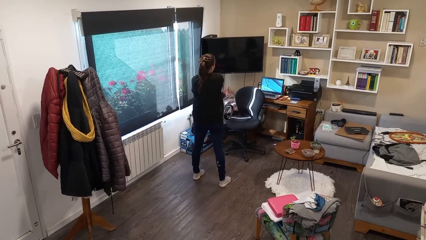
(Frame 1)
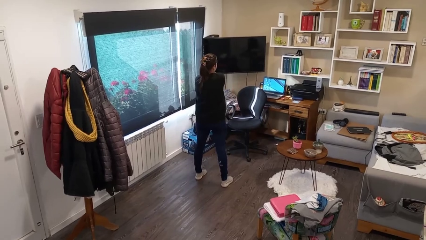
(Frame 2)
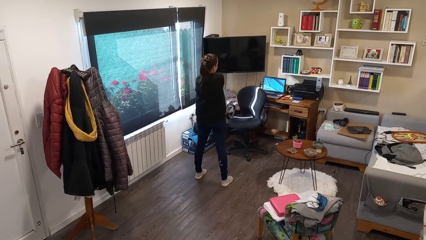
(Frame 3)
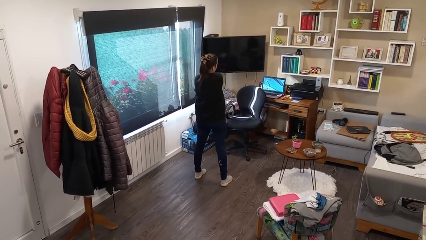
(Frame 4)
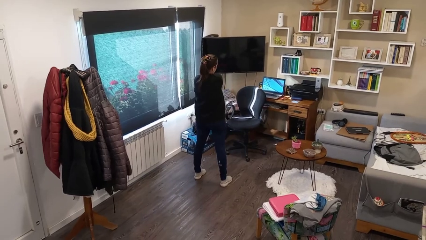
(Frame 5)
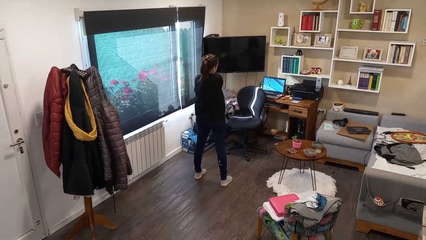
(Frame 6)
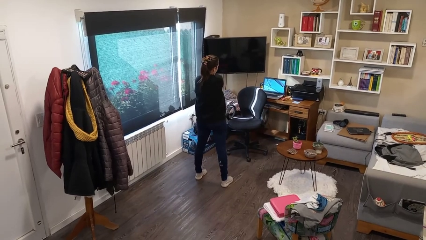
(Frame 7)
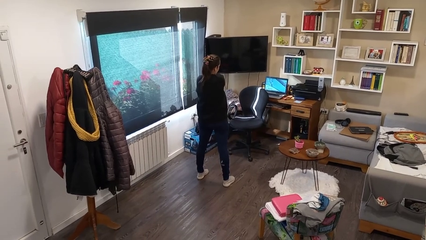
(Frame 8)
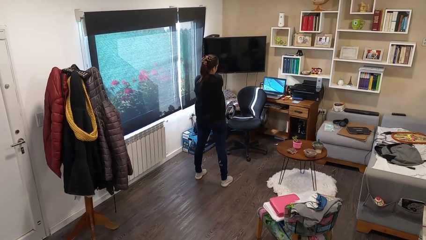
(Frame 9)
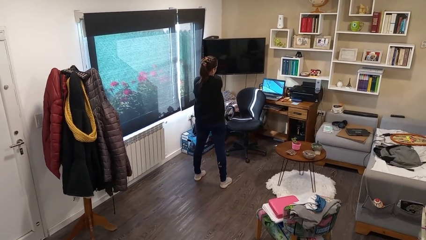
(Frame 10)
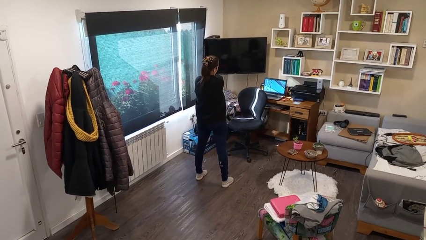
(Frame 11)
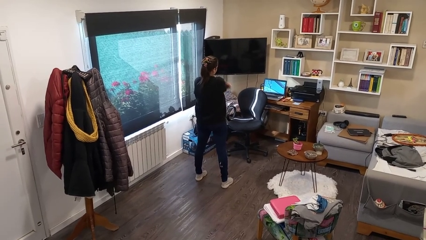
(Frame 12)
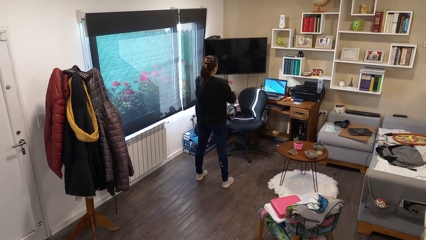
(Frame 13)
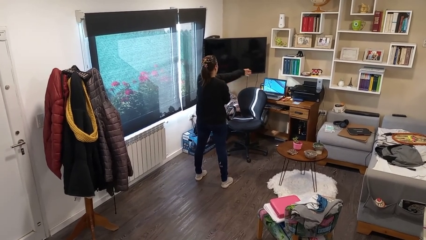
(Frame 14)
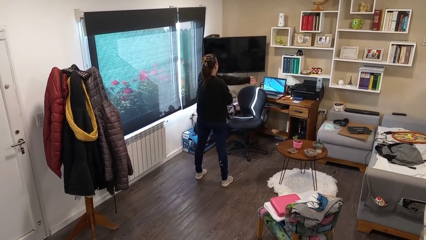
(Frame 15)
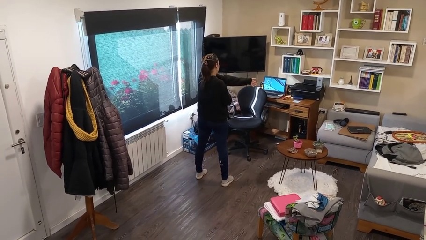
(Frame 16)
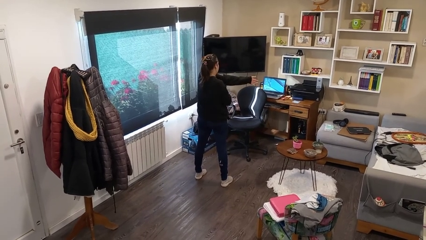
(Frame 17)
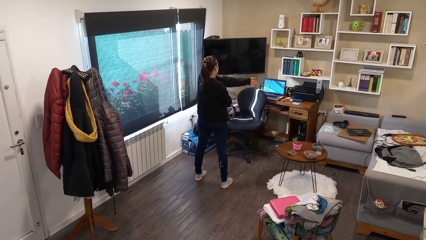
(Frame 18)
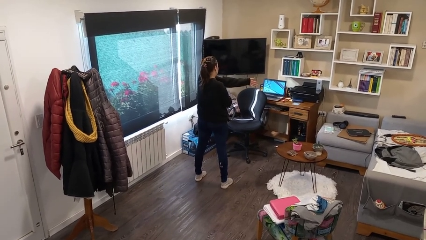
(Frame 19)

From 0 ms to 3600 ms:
person stretches arms to side

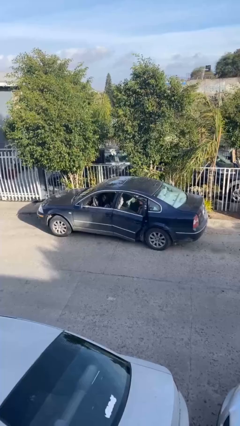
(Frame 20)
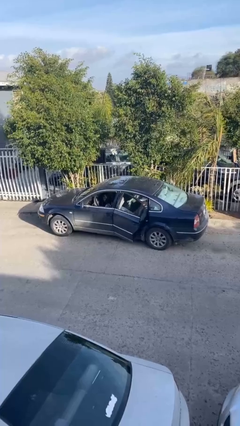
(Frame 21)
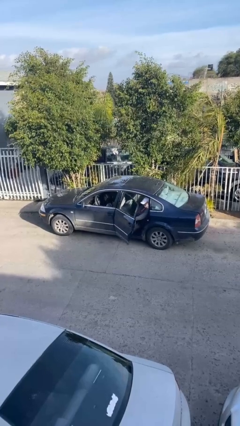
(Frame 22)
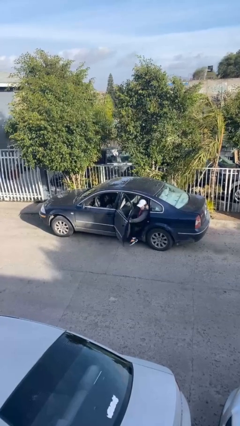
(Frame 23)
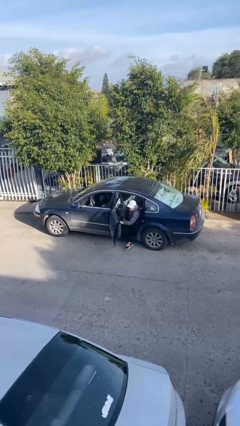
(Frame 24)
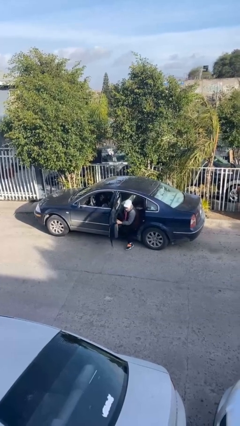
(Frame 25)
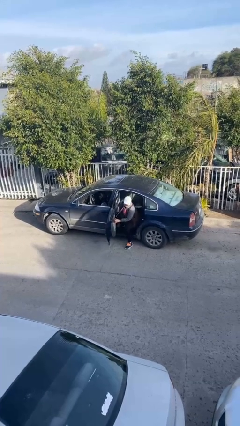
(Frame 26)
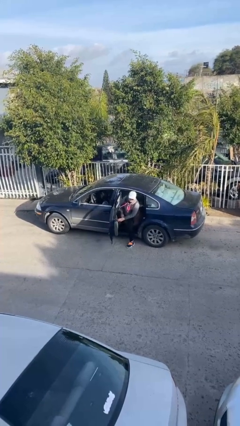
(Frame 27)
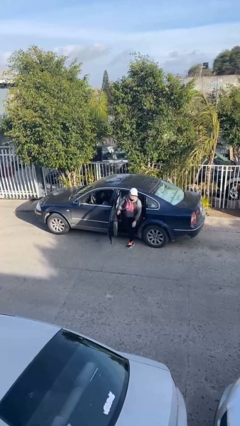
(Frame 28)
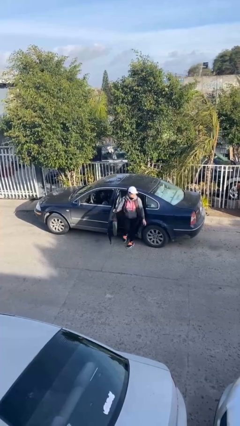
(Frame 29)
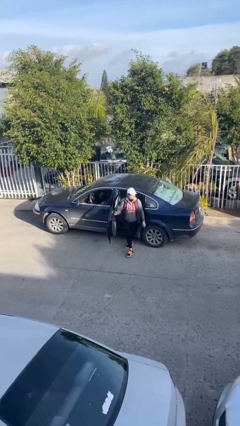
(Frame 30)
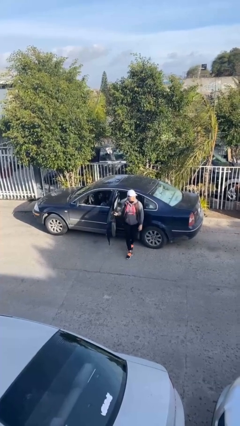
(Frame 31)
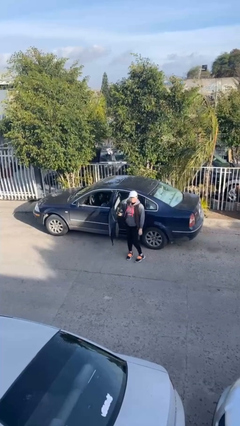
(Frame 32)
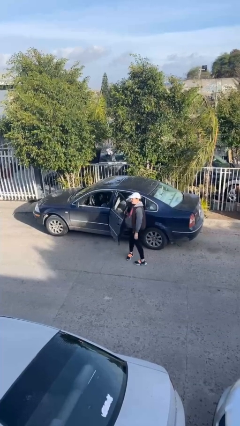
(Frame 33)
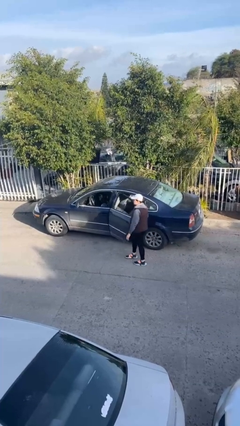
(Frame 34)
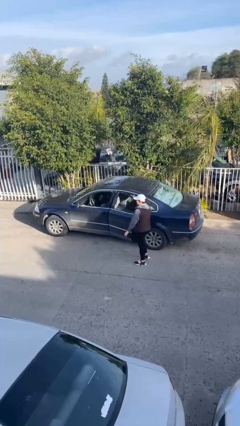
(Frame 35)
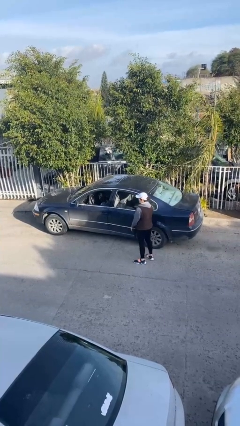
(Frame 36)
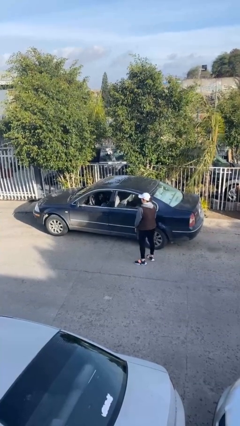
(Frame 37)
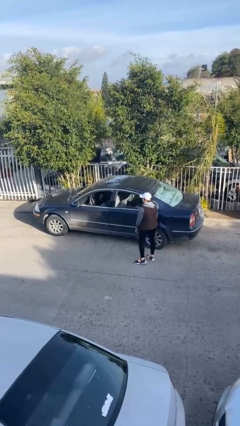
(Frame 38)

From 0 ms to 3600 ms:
car drops off person

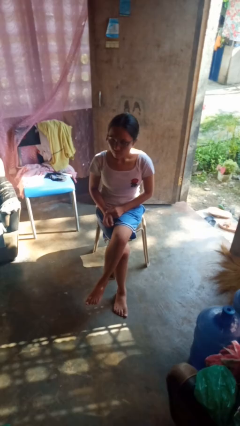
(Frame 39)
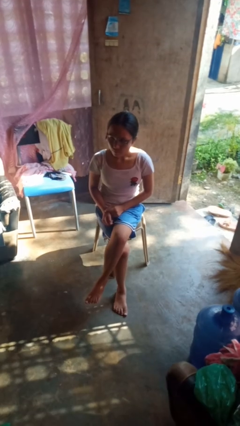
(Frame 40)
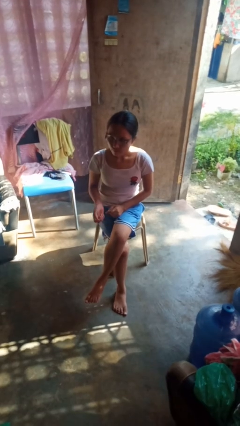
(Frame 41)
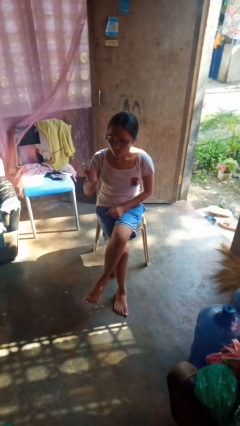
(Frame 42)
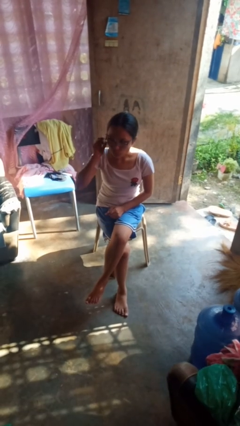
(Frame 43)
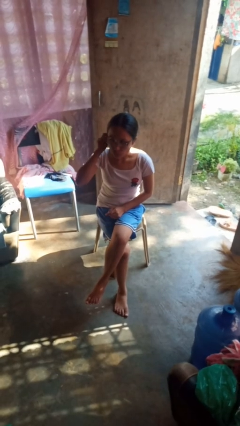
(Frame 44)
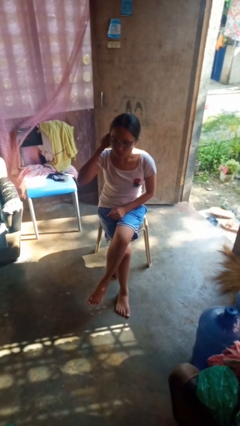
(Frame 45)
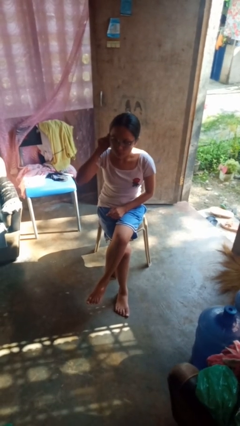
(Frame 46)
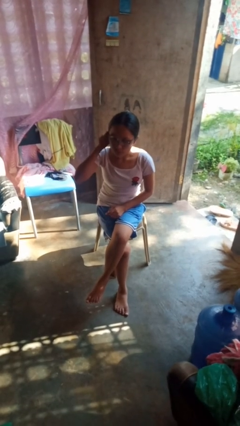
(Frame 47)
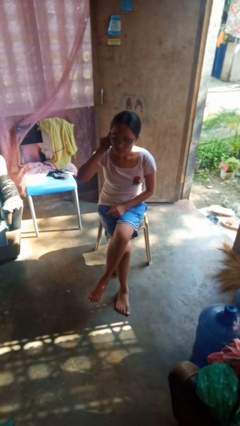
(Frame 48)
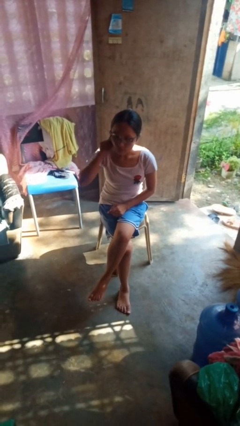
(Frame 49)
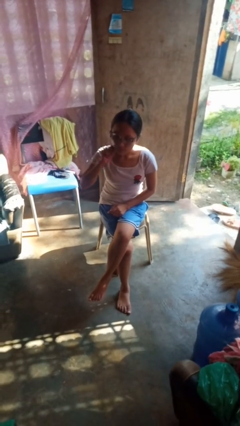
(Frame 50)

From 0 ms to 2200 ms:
person touches earlobe

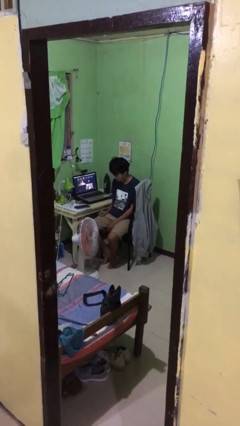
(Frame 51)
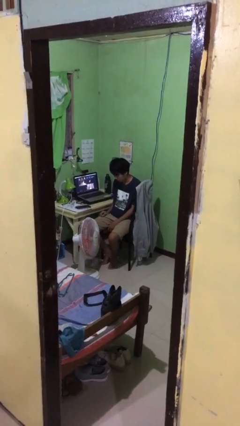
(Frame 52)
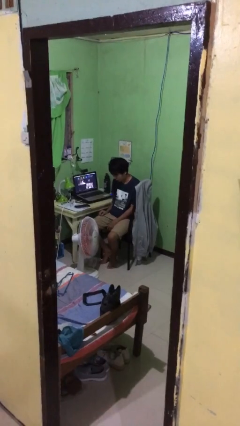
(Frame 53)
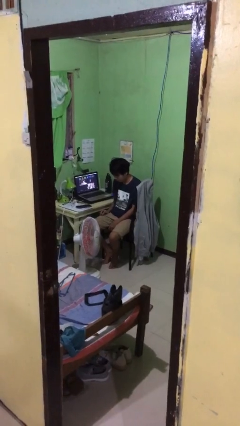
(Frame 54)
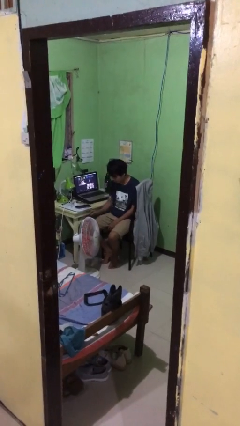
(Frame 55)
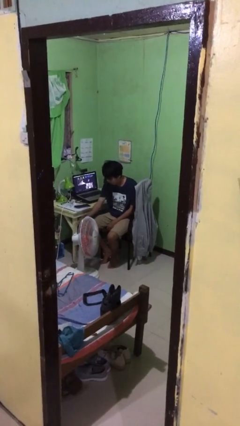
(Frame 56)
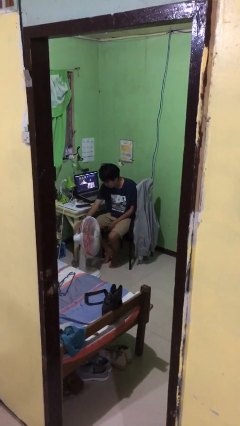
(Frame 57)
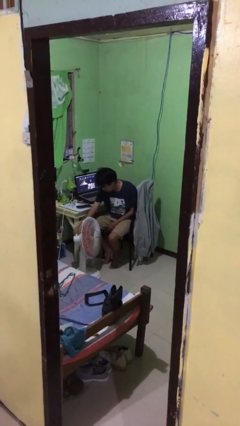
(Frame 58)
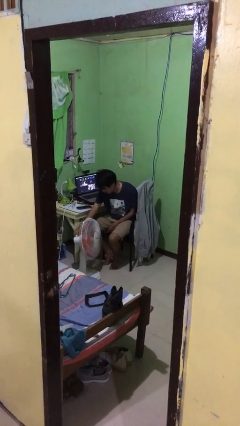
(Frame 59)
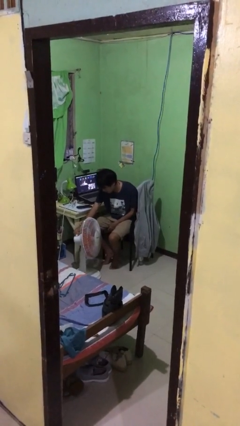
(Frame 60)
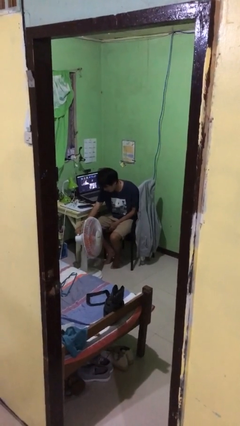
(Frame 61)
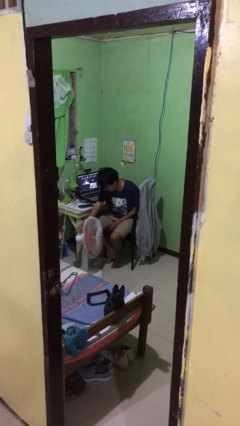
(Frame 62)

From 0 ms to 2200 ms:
person turns on fan

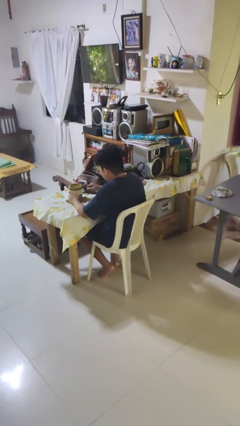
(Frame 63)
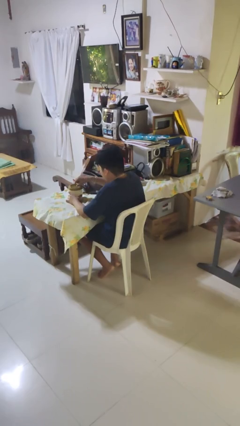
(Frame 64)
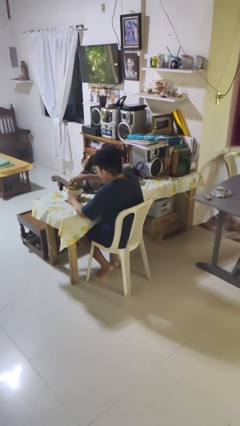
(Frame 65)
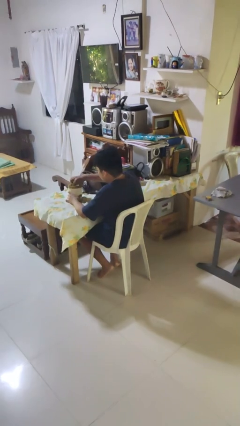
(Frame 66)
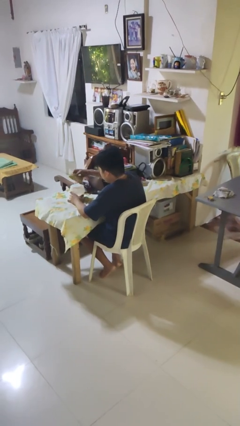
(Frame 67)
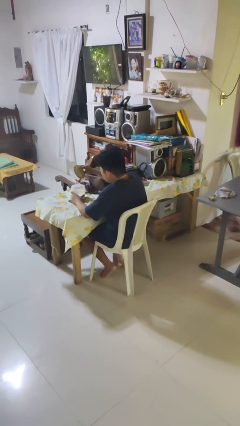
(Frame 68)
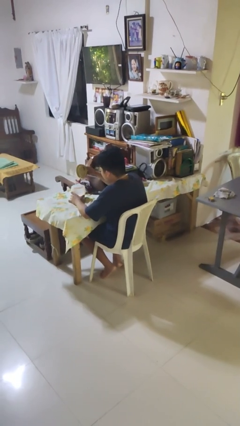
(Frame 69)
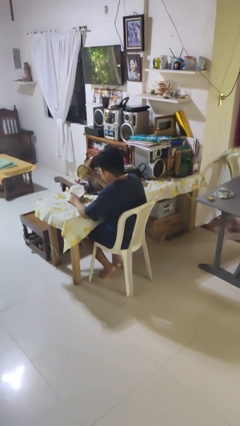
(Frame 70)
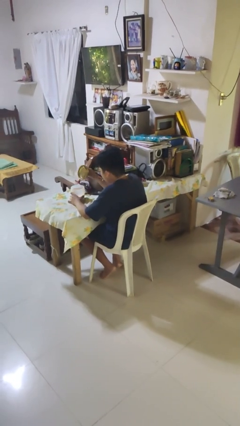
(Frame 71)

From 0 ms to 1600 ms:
person opens jar

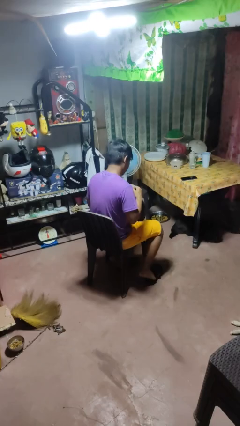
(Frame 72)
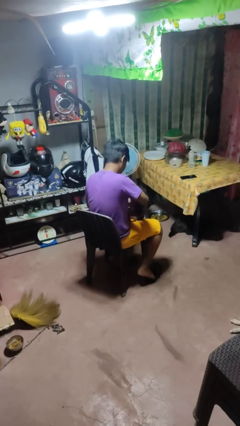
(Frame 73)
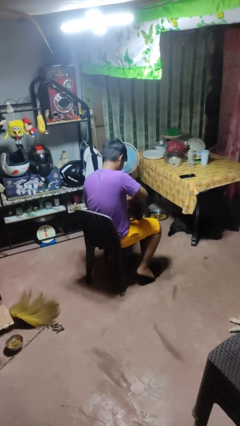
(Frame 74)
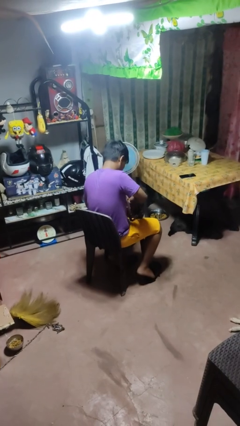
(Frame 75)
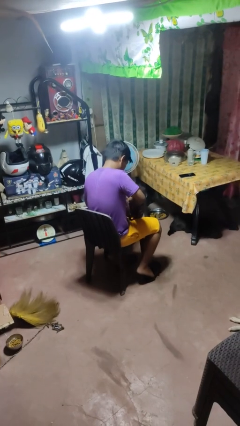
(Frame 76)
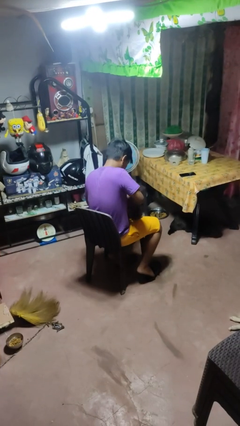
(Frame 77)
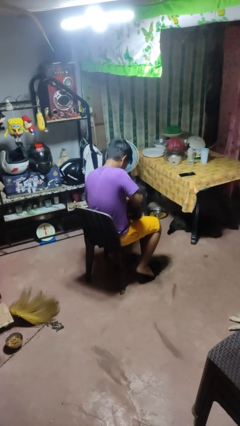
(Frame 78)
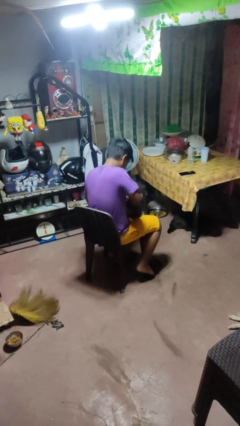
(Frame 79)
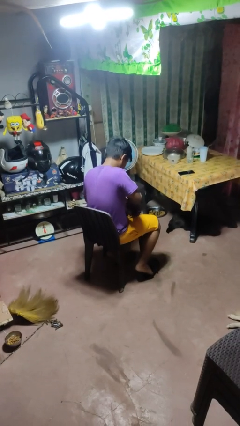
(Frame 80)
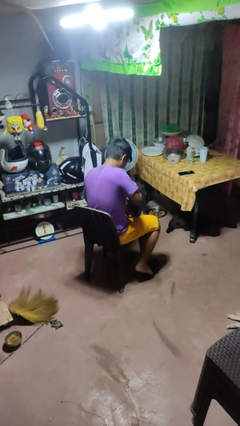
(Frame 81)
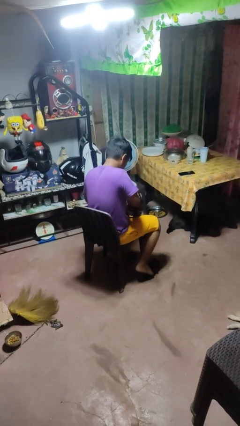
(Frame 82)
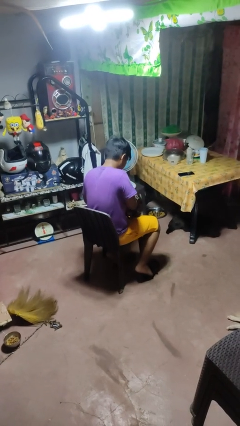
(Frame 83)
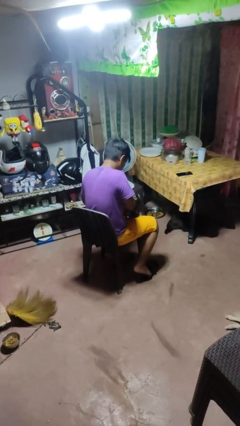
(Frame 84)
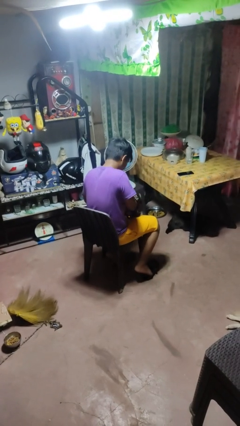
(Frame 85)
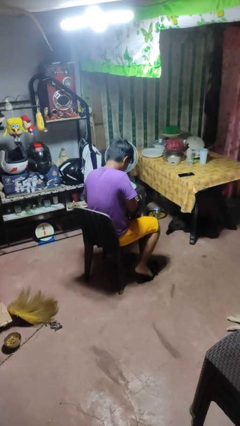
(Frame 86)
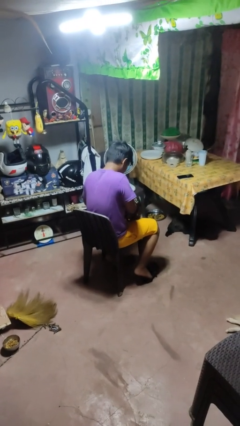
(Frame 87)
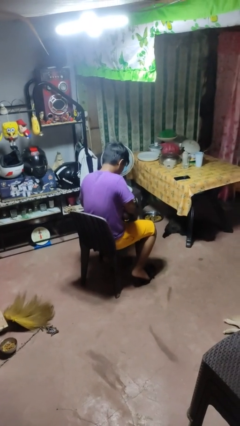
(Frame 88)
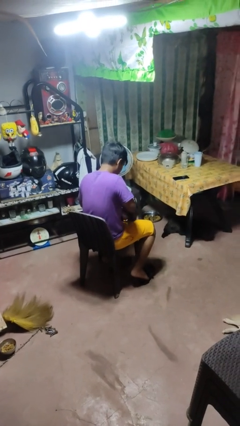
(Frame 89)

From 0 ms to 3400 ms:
person searches in purse

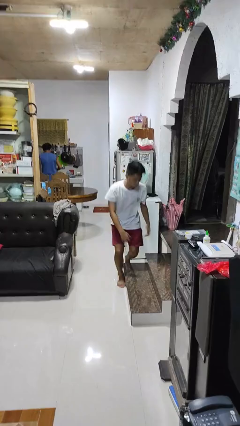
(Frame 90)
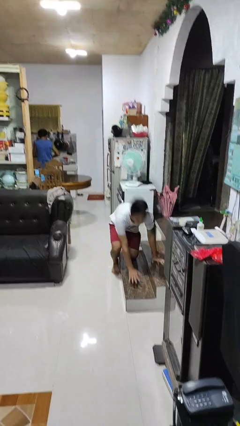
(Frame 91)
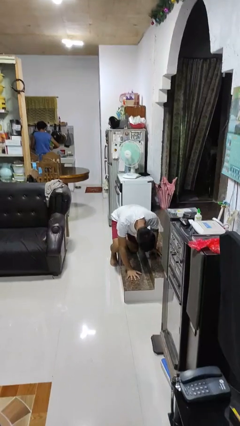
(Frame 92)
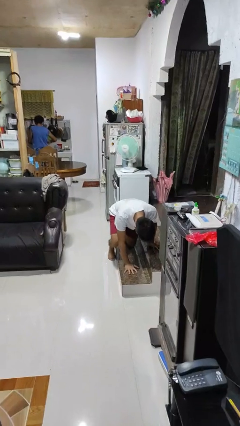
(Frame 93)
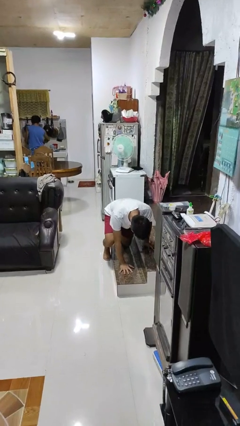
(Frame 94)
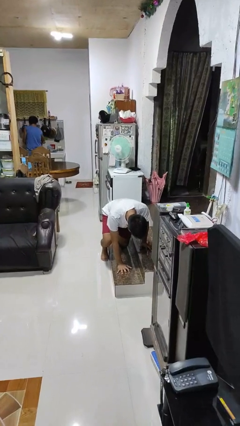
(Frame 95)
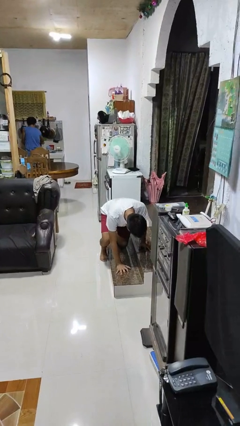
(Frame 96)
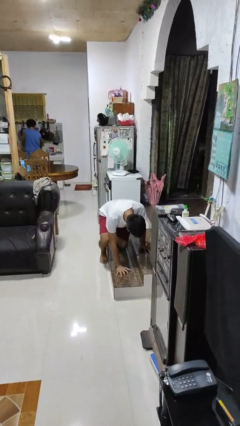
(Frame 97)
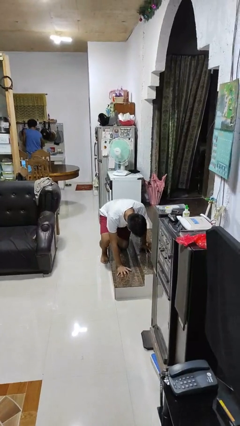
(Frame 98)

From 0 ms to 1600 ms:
person trips on object on floor
